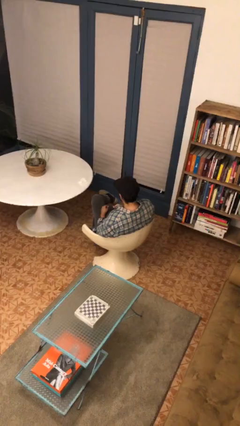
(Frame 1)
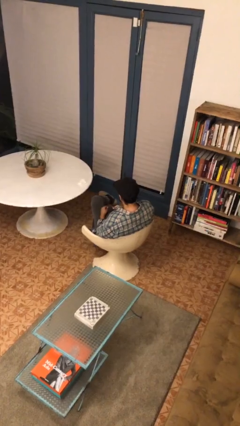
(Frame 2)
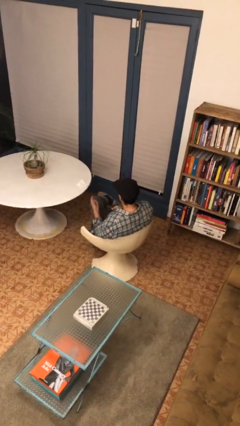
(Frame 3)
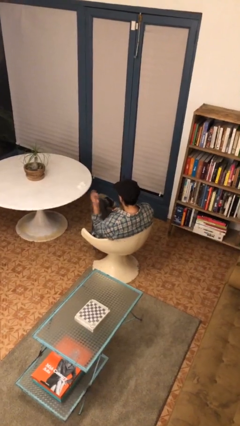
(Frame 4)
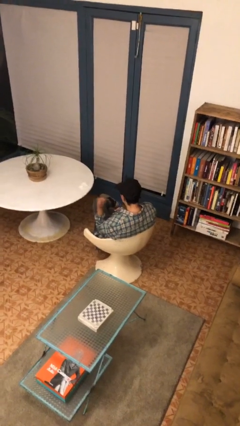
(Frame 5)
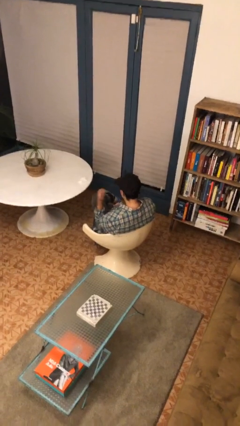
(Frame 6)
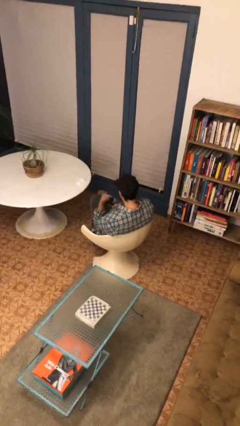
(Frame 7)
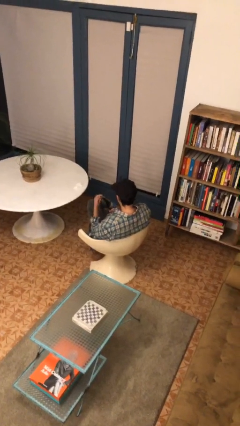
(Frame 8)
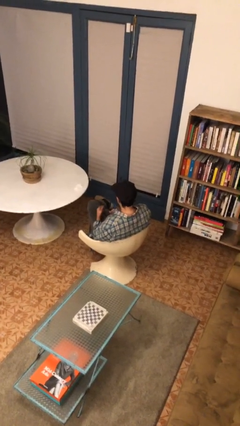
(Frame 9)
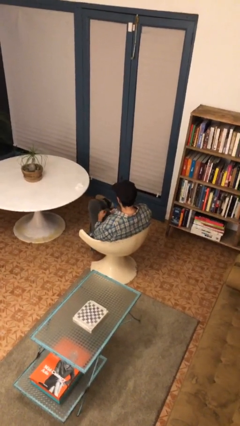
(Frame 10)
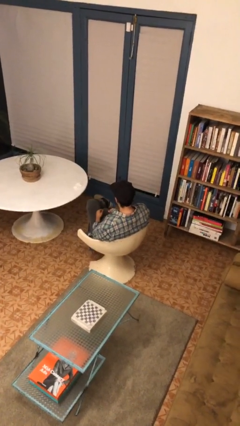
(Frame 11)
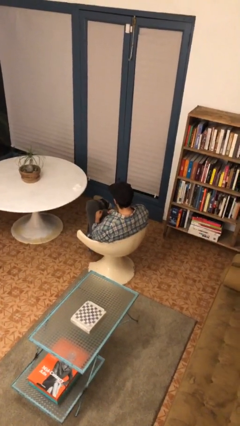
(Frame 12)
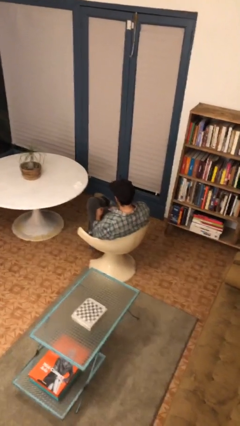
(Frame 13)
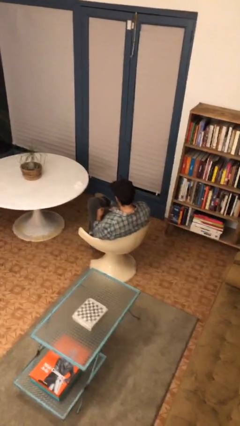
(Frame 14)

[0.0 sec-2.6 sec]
person gestures behind me

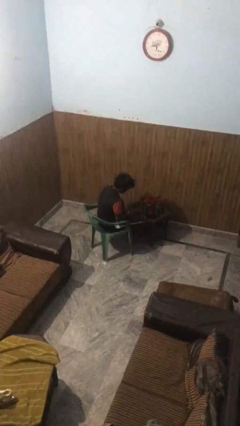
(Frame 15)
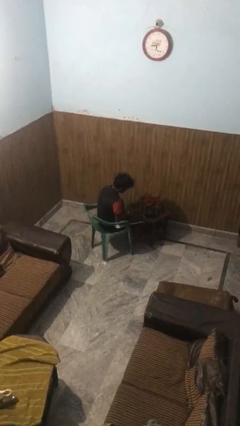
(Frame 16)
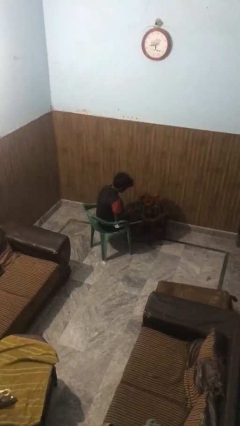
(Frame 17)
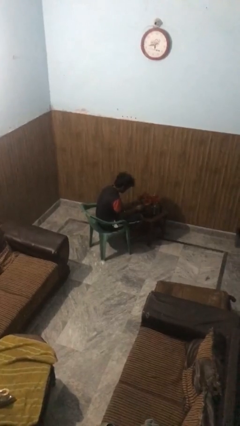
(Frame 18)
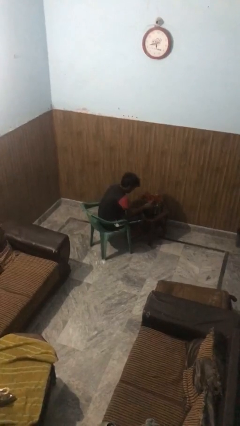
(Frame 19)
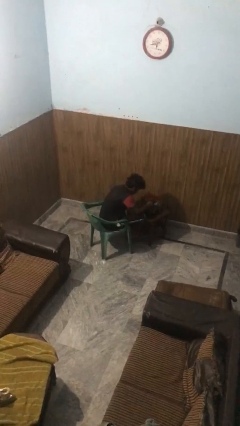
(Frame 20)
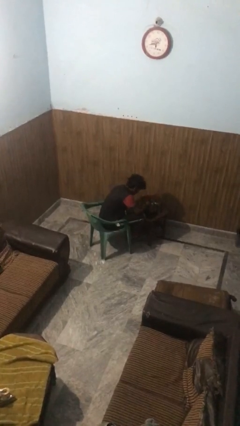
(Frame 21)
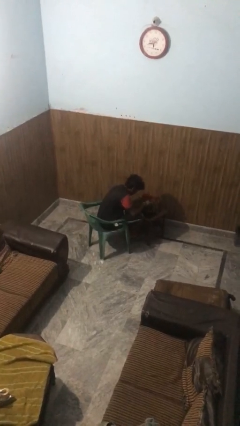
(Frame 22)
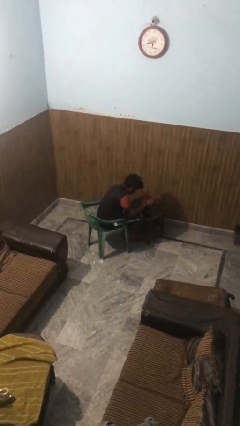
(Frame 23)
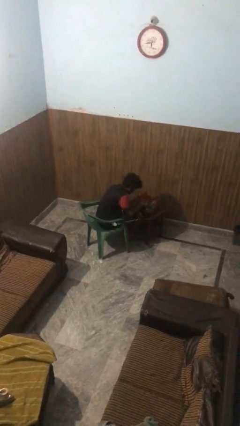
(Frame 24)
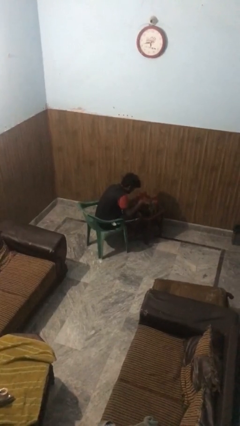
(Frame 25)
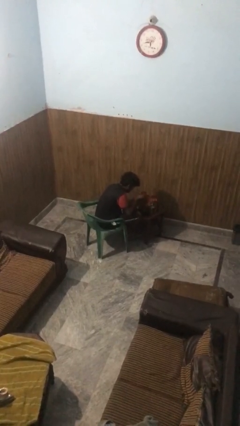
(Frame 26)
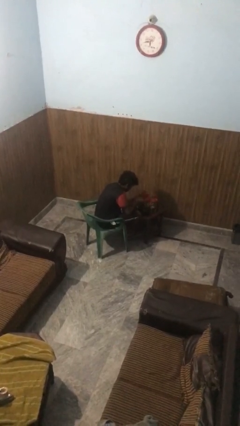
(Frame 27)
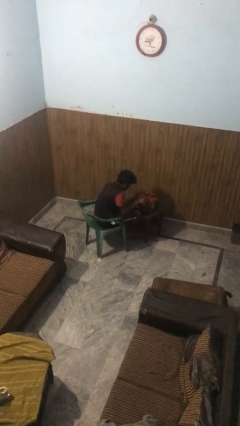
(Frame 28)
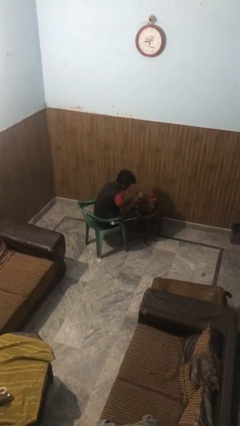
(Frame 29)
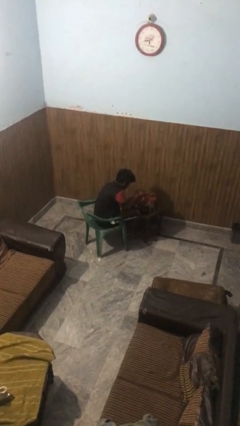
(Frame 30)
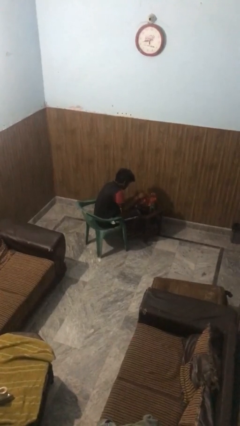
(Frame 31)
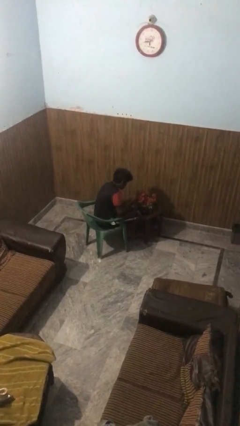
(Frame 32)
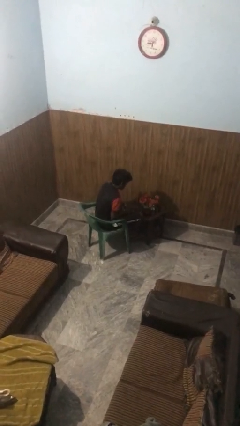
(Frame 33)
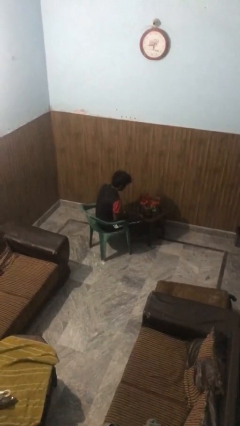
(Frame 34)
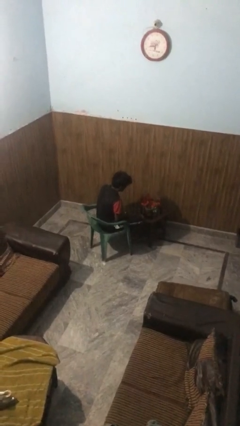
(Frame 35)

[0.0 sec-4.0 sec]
person arranges flowers in vase

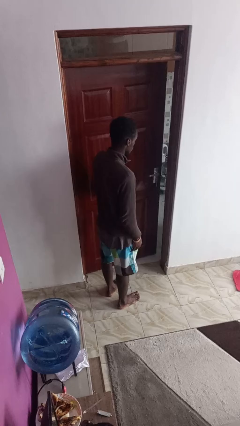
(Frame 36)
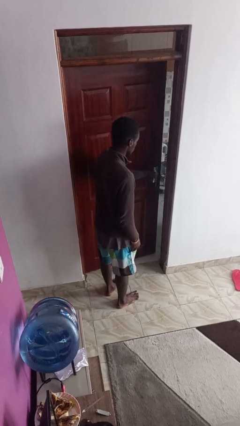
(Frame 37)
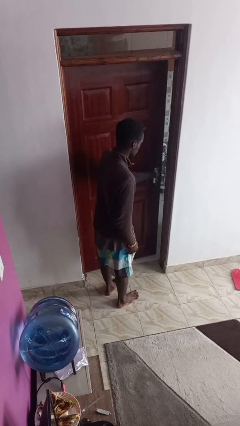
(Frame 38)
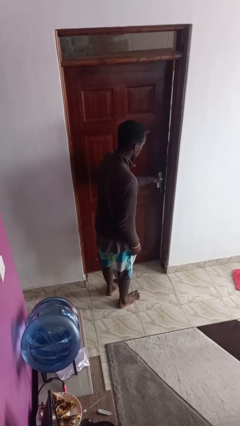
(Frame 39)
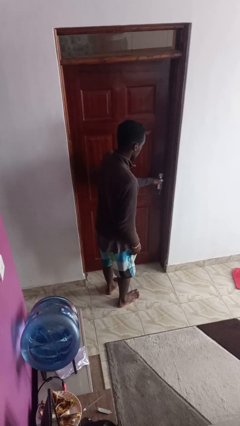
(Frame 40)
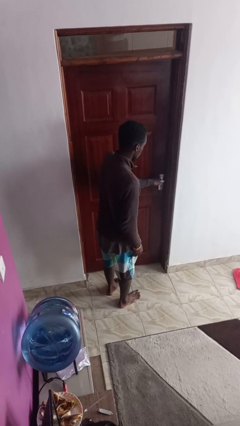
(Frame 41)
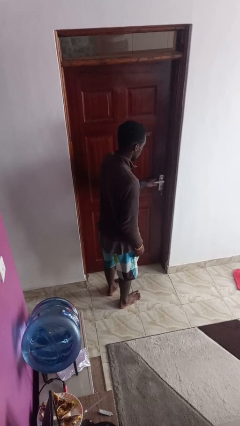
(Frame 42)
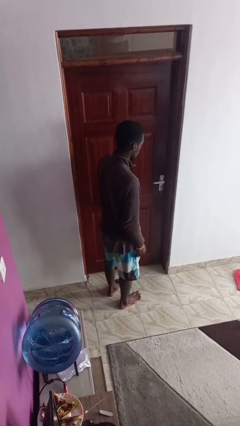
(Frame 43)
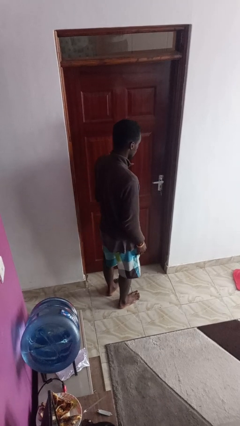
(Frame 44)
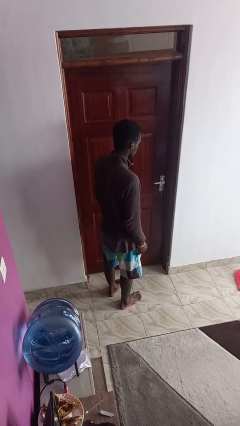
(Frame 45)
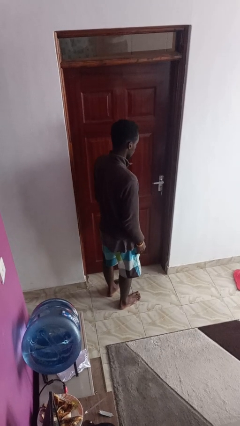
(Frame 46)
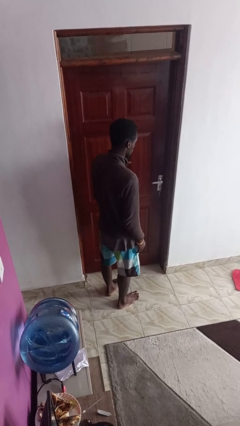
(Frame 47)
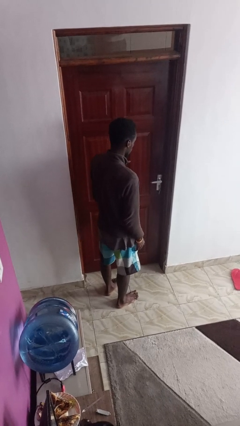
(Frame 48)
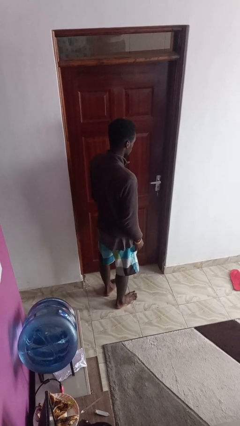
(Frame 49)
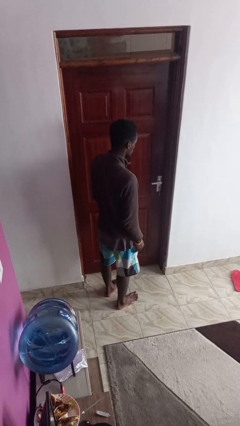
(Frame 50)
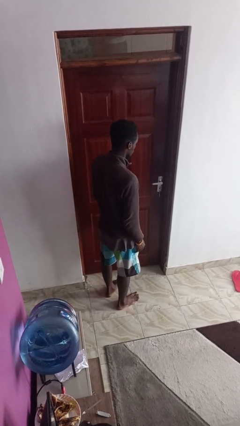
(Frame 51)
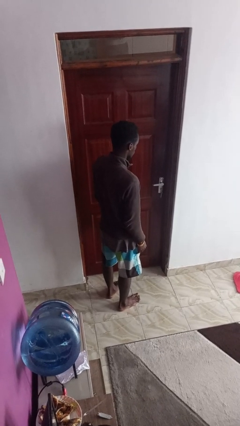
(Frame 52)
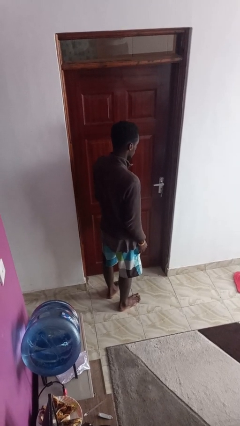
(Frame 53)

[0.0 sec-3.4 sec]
person closes facility door

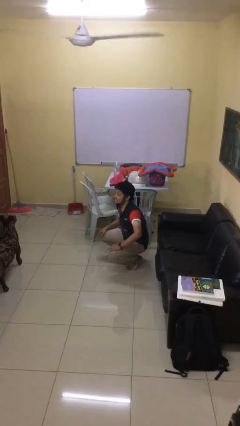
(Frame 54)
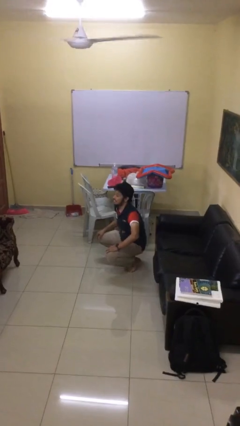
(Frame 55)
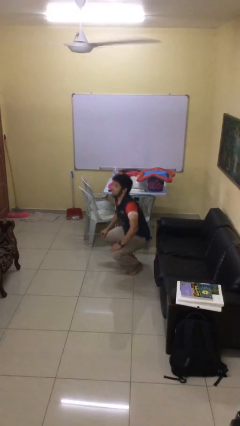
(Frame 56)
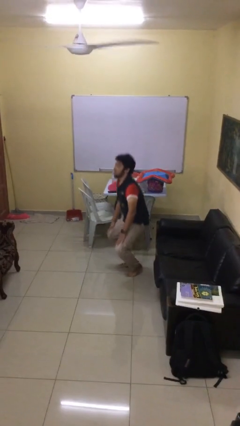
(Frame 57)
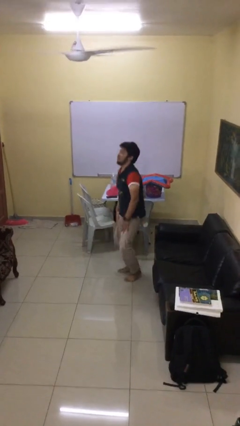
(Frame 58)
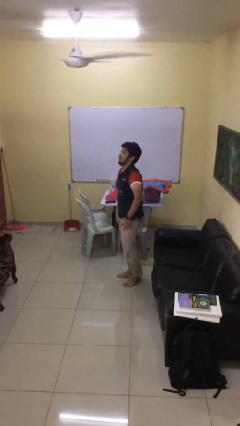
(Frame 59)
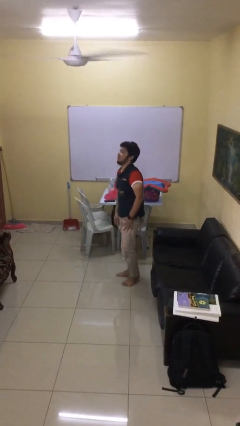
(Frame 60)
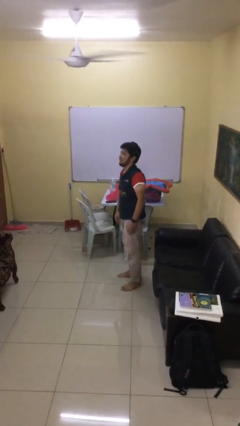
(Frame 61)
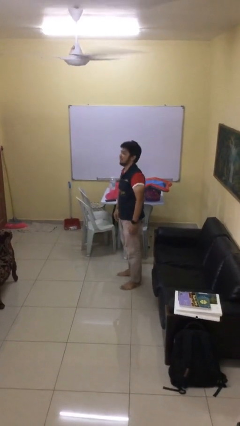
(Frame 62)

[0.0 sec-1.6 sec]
person stands up

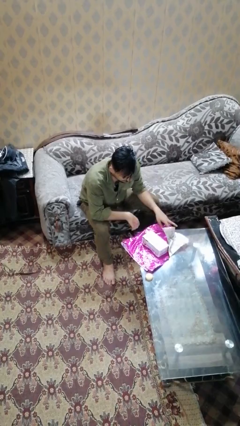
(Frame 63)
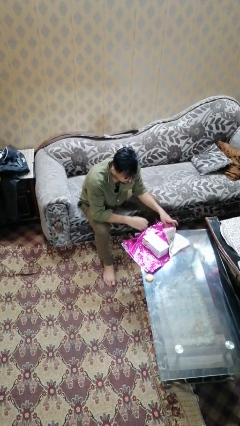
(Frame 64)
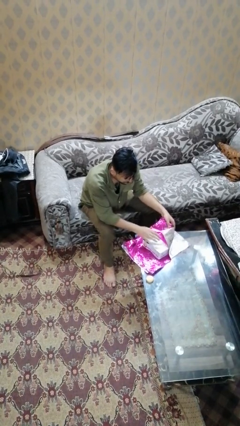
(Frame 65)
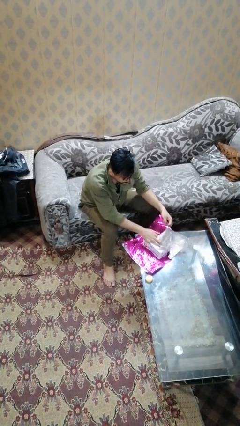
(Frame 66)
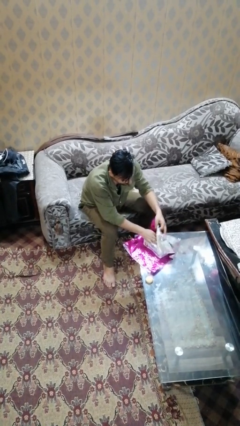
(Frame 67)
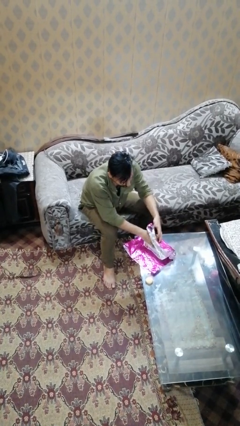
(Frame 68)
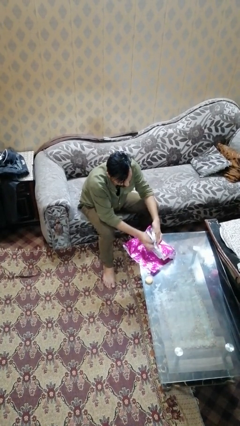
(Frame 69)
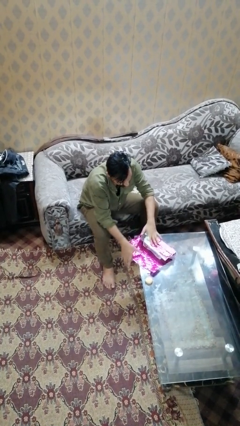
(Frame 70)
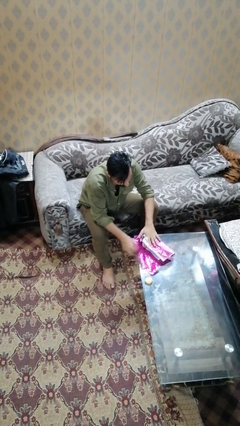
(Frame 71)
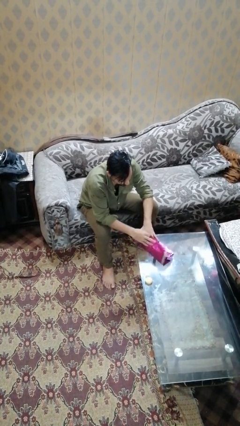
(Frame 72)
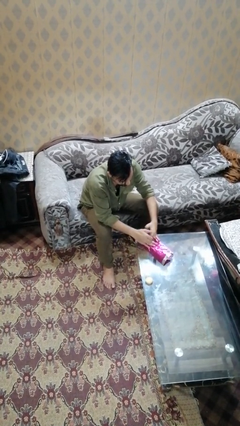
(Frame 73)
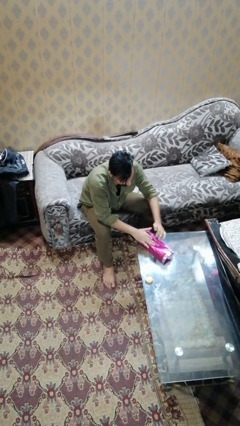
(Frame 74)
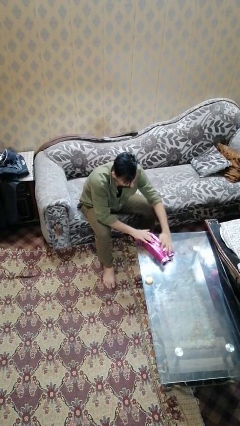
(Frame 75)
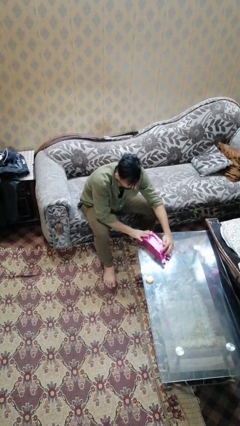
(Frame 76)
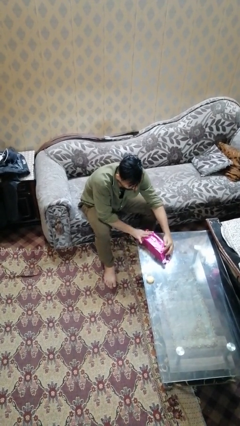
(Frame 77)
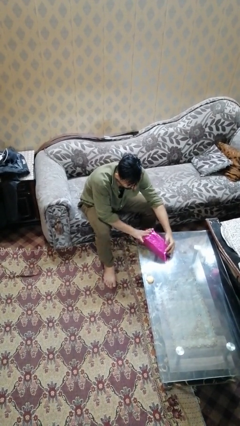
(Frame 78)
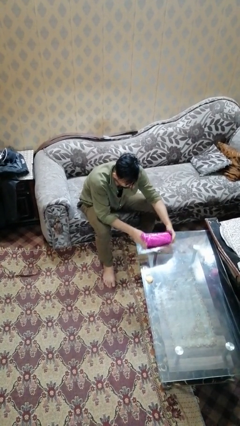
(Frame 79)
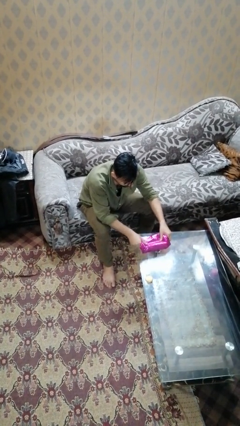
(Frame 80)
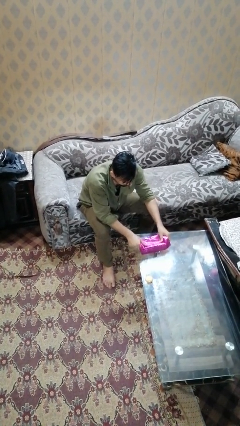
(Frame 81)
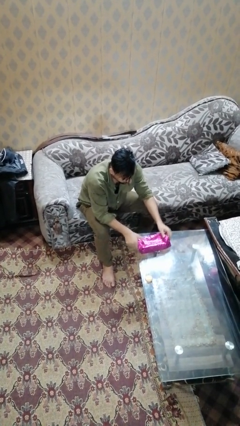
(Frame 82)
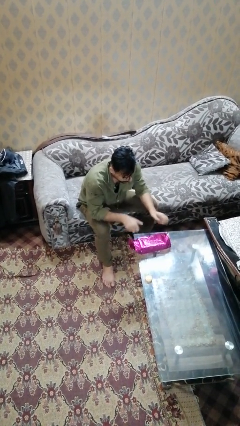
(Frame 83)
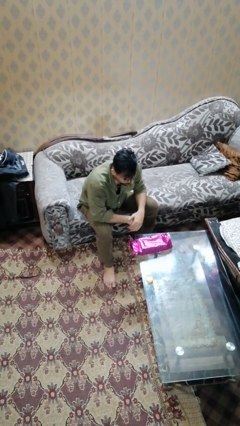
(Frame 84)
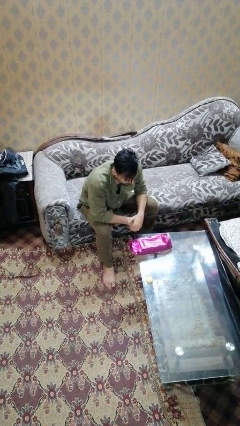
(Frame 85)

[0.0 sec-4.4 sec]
person wraps box

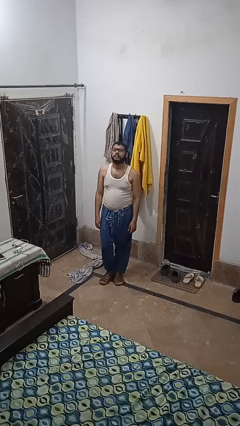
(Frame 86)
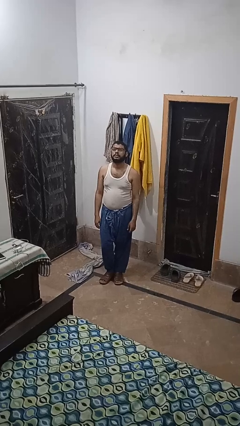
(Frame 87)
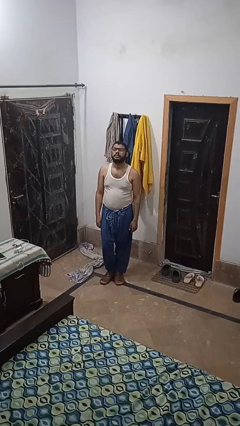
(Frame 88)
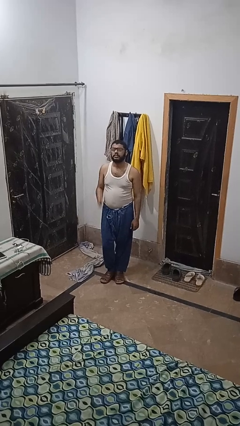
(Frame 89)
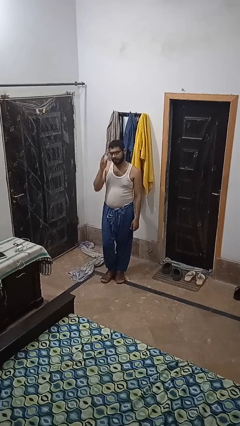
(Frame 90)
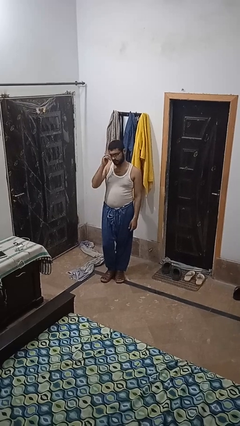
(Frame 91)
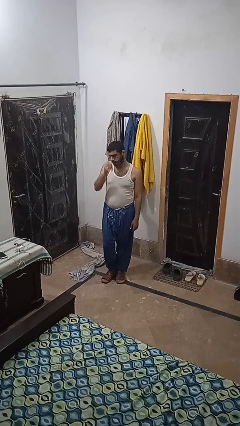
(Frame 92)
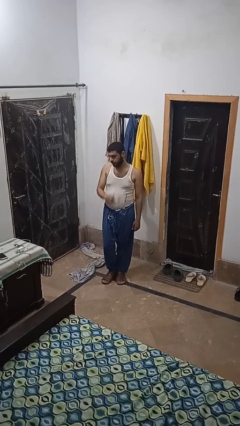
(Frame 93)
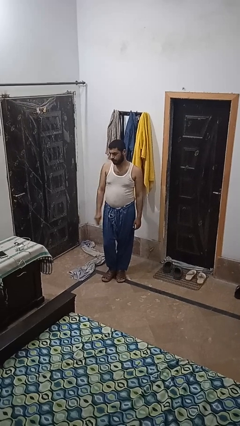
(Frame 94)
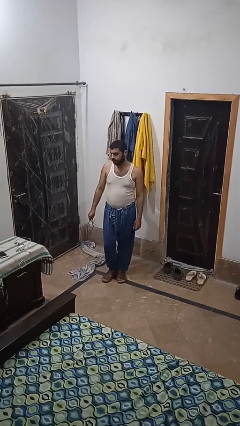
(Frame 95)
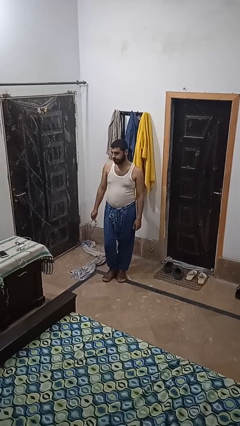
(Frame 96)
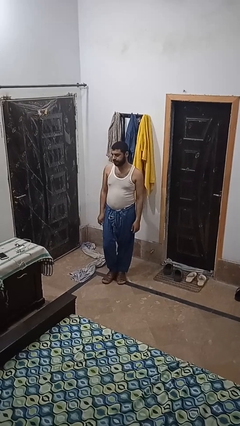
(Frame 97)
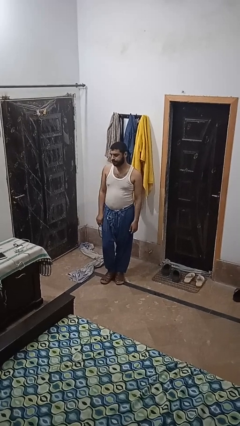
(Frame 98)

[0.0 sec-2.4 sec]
person takes off glasses
